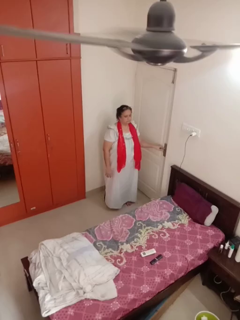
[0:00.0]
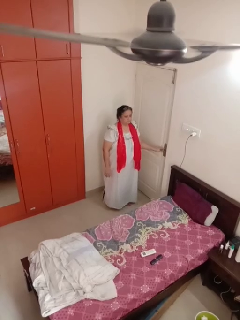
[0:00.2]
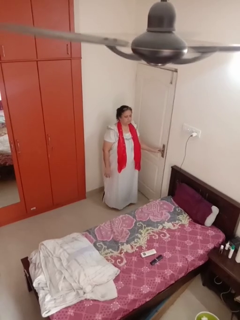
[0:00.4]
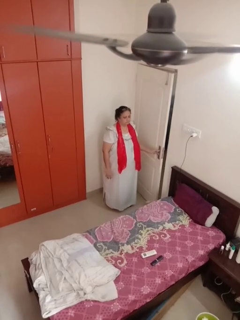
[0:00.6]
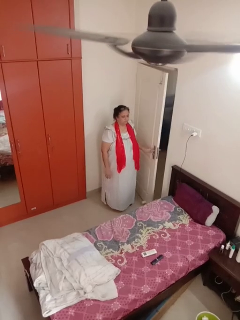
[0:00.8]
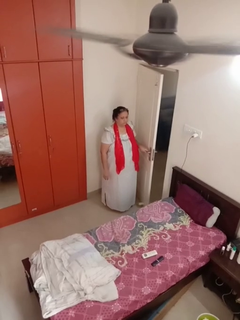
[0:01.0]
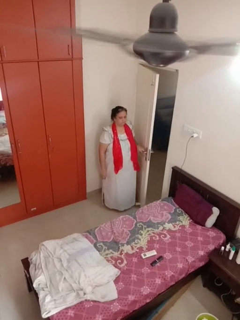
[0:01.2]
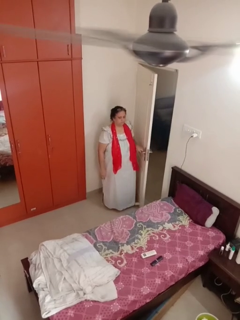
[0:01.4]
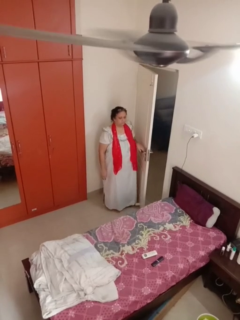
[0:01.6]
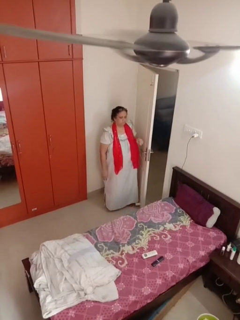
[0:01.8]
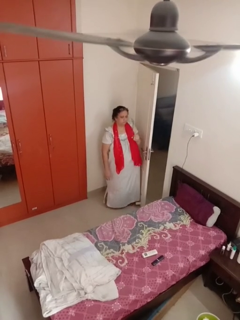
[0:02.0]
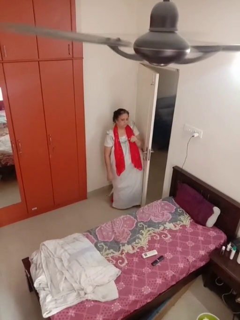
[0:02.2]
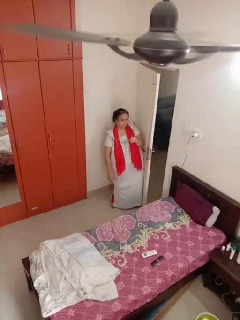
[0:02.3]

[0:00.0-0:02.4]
person opens facility door

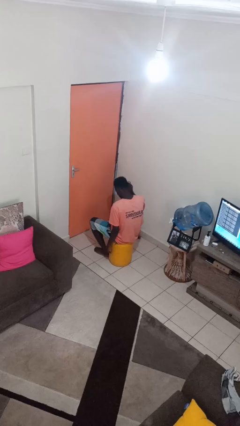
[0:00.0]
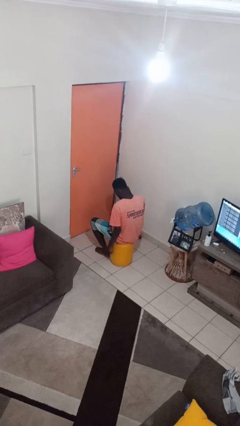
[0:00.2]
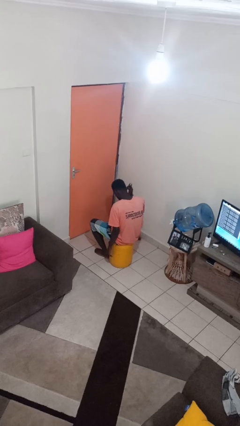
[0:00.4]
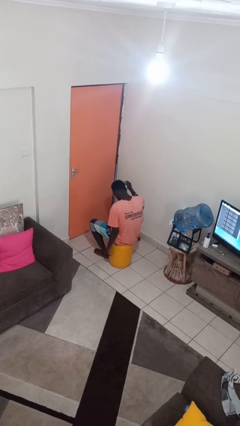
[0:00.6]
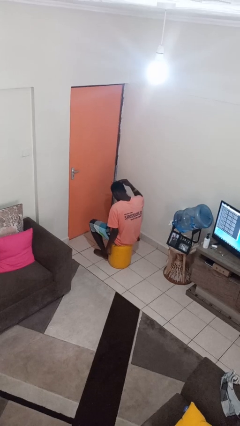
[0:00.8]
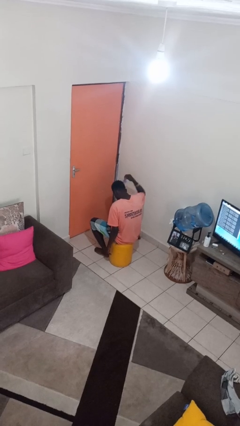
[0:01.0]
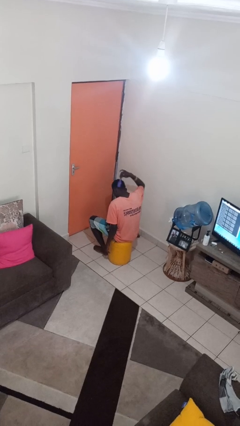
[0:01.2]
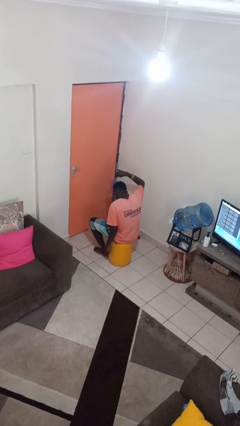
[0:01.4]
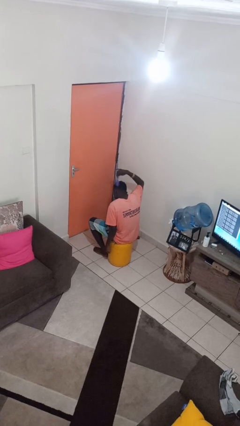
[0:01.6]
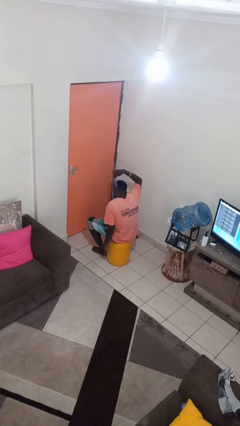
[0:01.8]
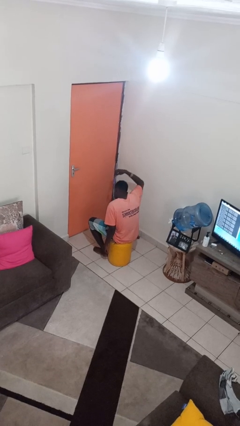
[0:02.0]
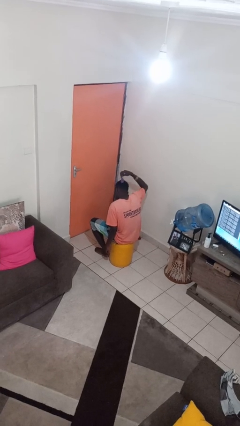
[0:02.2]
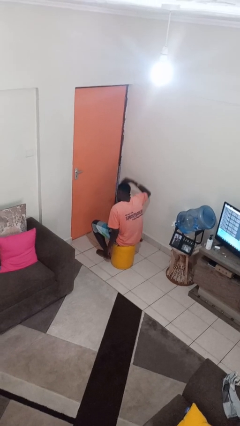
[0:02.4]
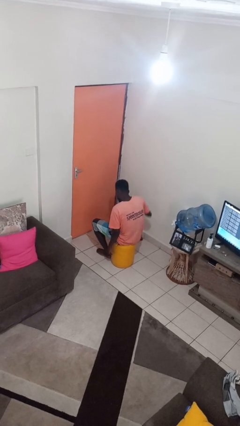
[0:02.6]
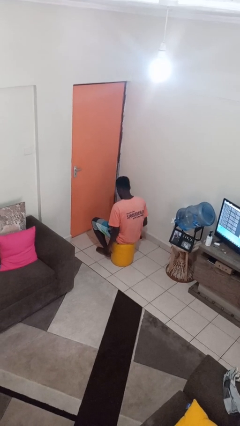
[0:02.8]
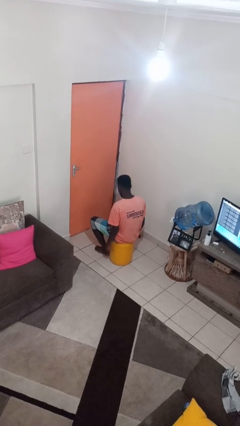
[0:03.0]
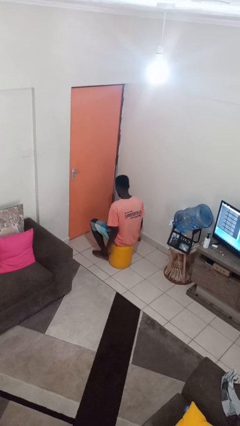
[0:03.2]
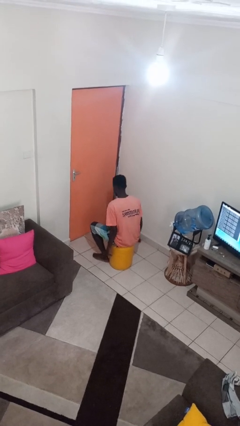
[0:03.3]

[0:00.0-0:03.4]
person brushes hair

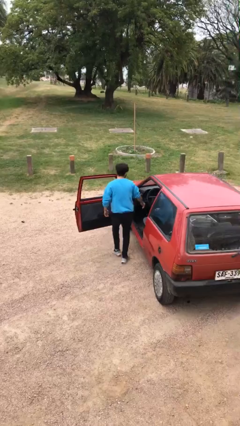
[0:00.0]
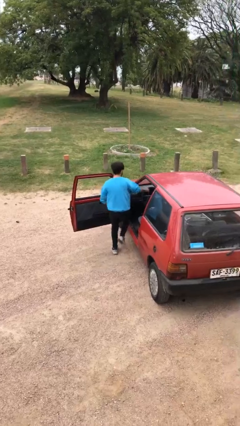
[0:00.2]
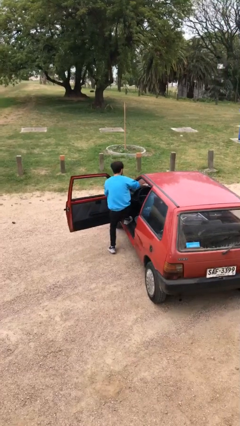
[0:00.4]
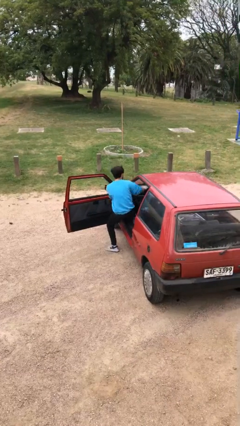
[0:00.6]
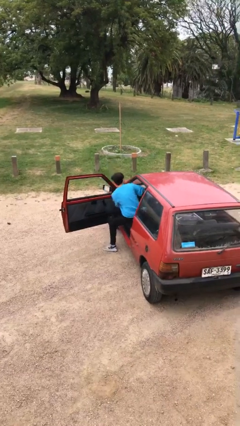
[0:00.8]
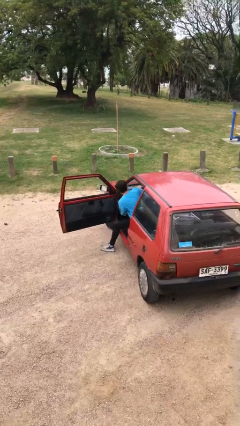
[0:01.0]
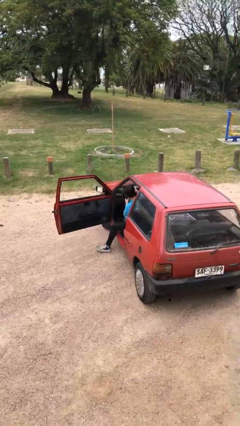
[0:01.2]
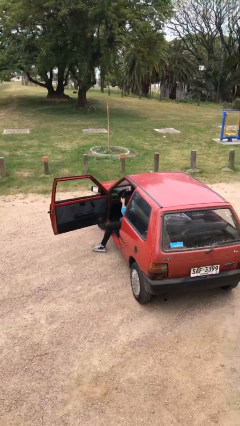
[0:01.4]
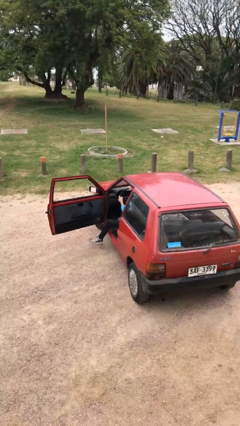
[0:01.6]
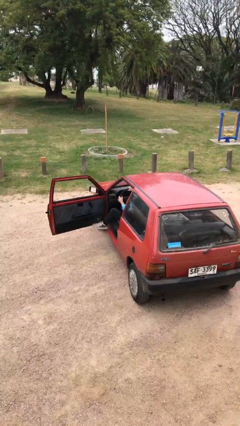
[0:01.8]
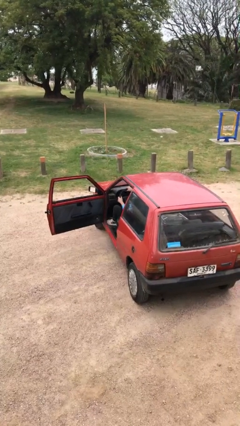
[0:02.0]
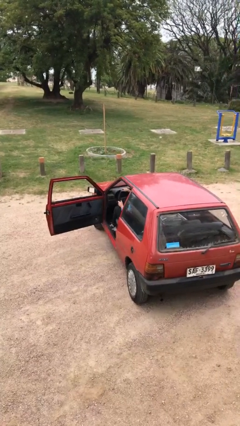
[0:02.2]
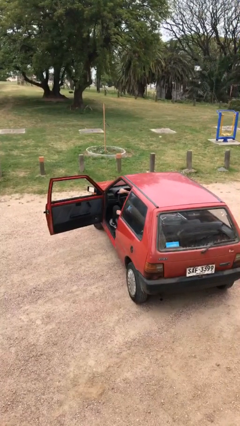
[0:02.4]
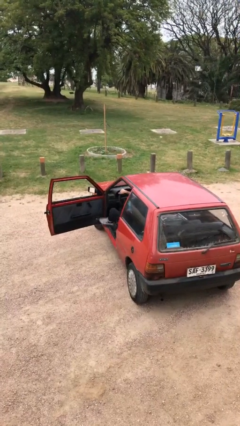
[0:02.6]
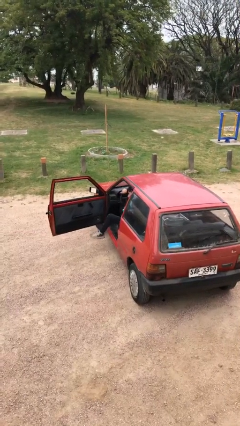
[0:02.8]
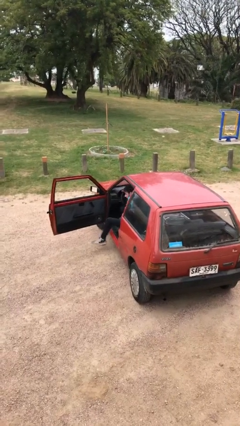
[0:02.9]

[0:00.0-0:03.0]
person enters car

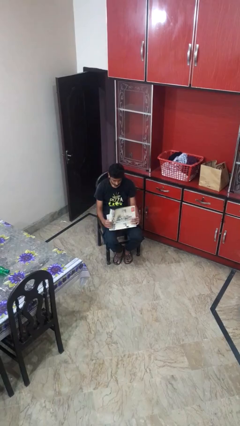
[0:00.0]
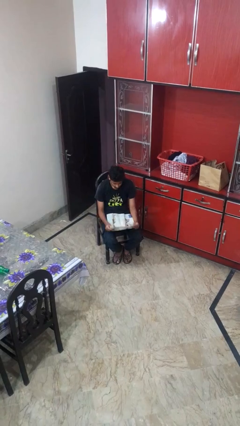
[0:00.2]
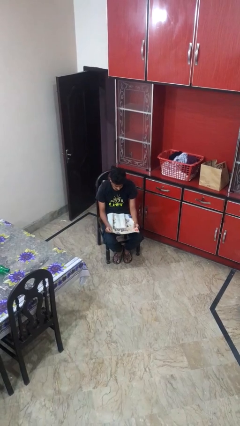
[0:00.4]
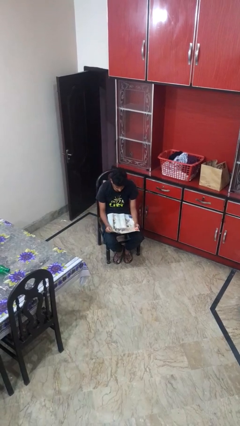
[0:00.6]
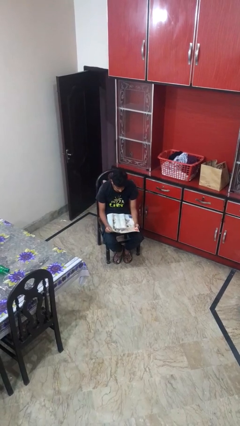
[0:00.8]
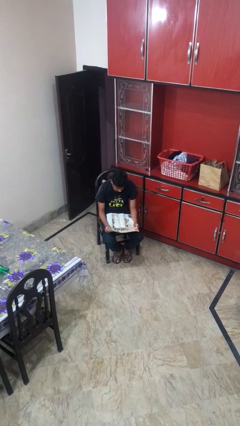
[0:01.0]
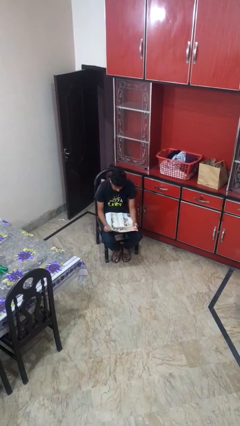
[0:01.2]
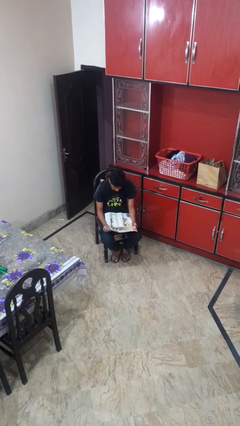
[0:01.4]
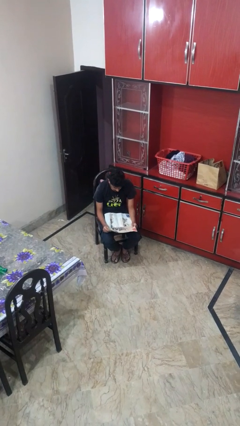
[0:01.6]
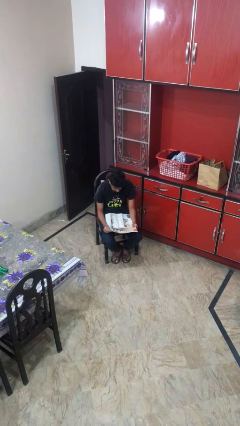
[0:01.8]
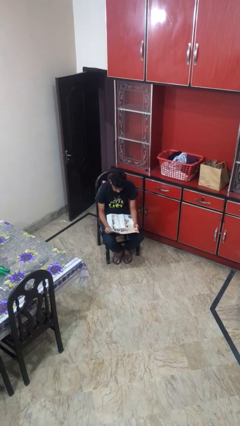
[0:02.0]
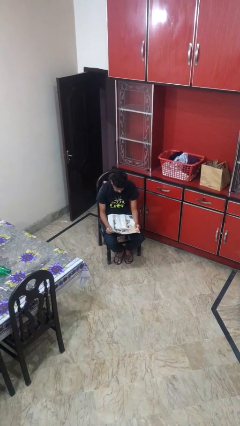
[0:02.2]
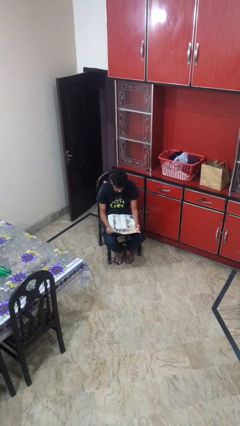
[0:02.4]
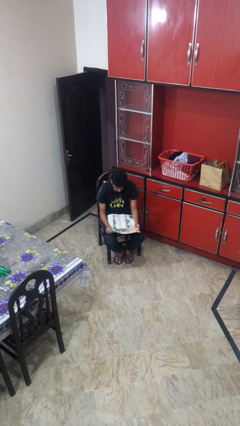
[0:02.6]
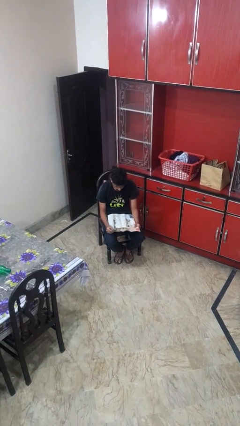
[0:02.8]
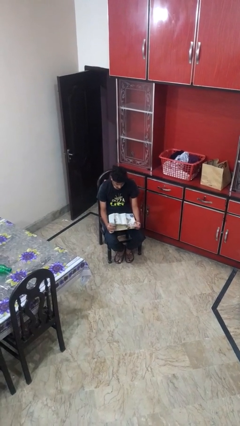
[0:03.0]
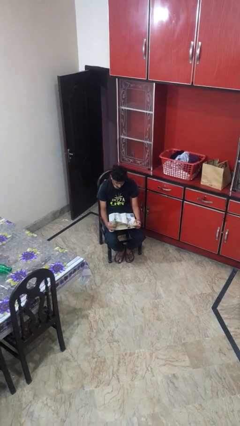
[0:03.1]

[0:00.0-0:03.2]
person reads newspaper

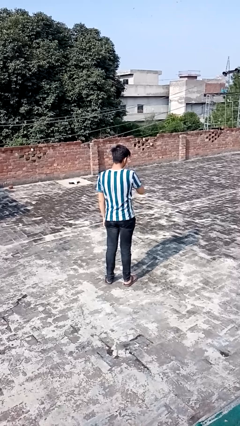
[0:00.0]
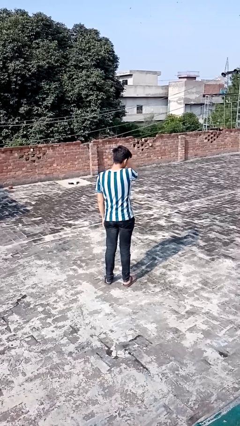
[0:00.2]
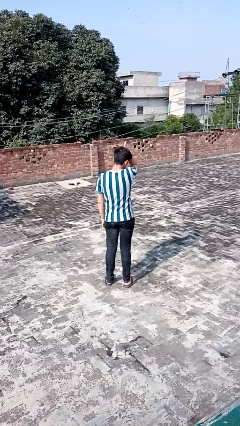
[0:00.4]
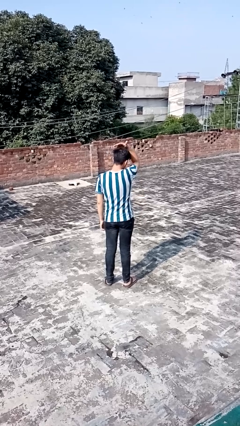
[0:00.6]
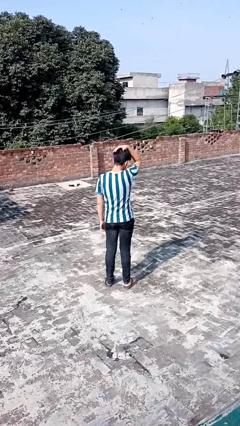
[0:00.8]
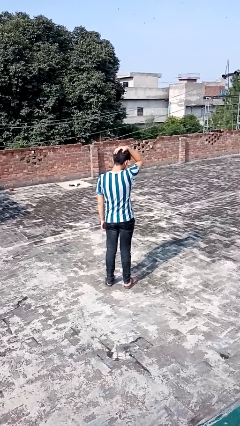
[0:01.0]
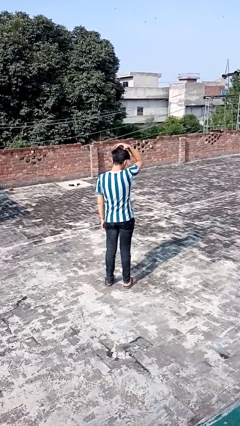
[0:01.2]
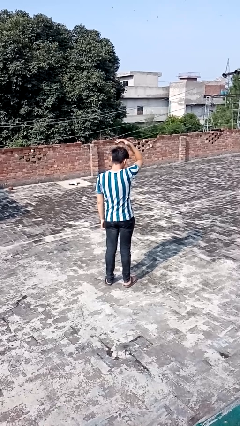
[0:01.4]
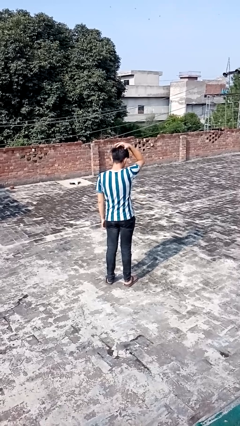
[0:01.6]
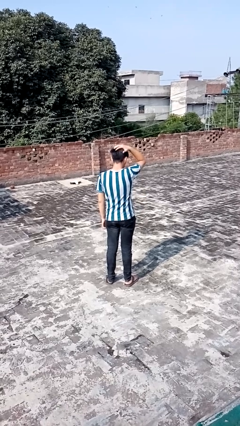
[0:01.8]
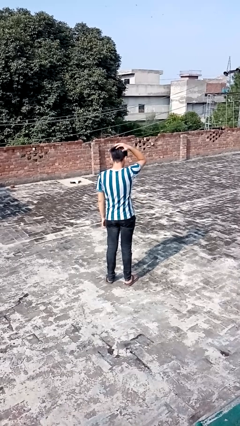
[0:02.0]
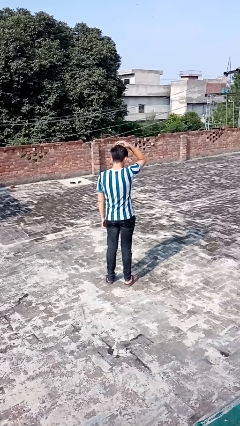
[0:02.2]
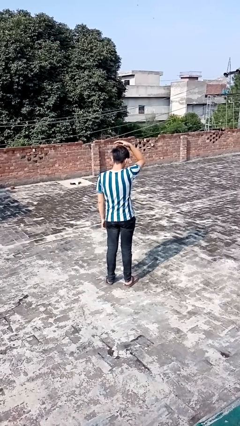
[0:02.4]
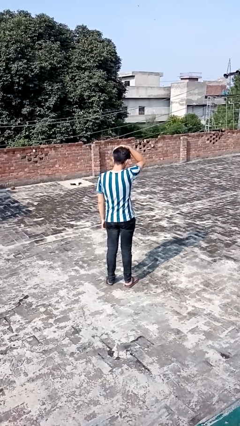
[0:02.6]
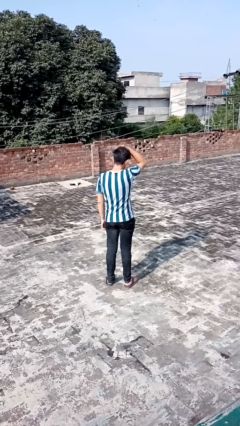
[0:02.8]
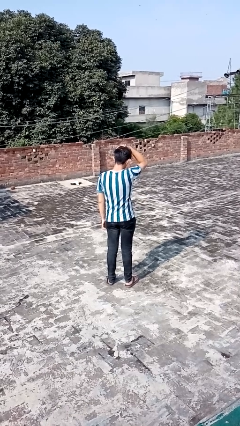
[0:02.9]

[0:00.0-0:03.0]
person pats head

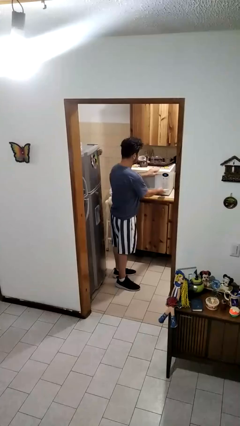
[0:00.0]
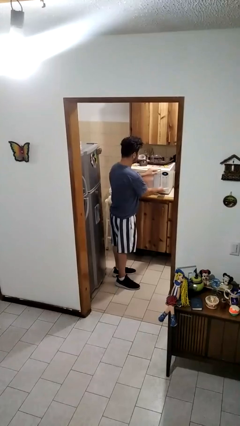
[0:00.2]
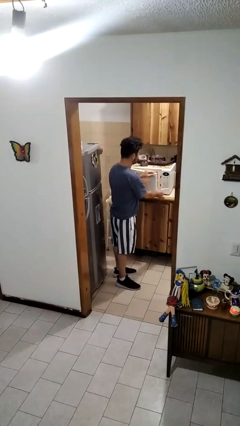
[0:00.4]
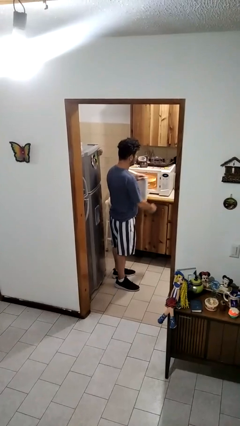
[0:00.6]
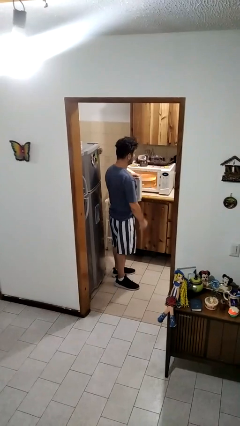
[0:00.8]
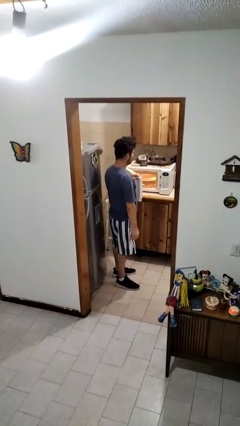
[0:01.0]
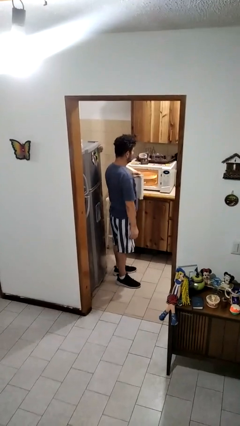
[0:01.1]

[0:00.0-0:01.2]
person opens microwave

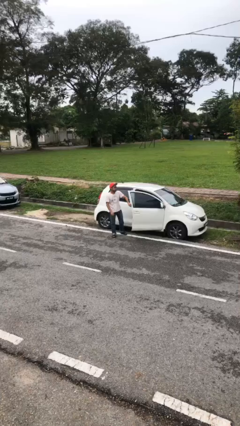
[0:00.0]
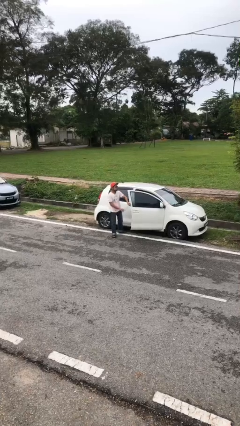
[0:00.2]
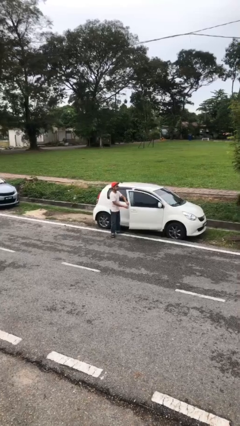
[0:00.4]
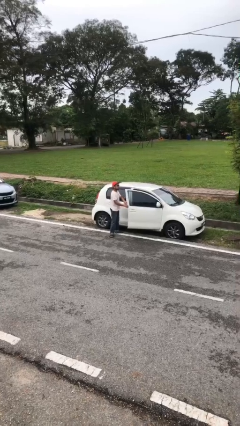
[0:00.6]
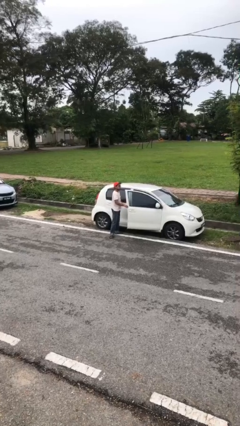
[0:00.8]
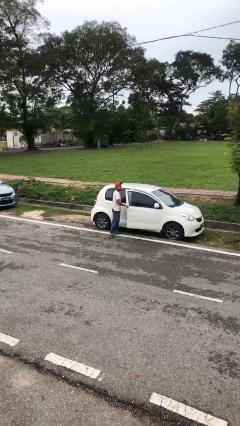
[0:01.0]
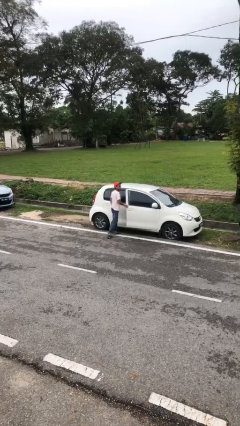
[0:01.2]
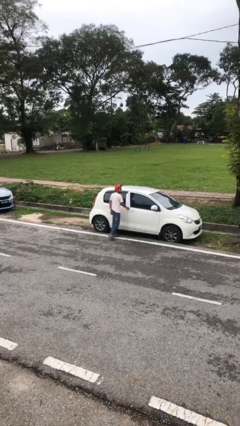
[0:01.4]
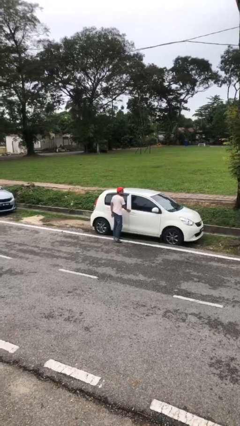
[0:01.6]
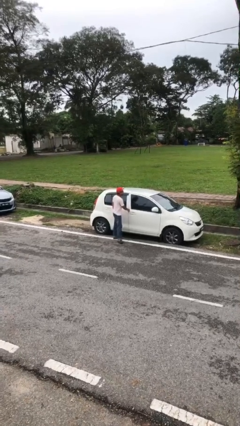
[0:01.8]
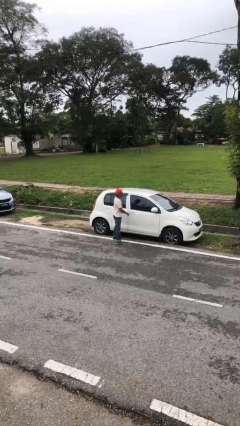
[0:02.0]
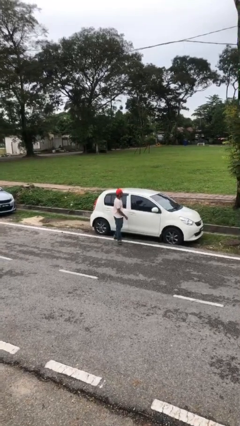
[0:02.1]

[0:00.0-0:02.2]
person closes car door
